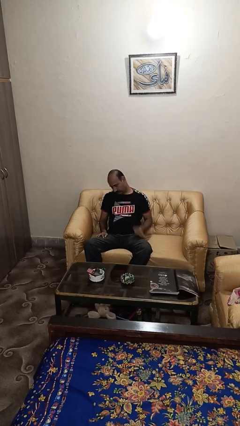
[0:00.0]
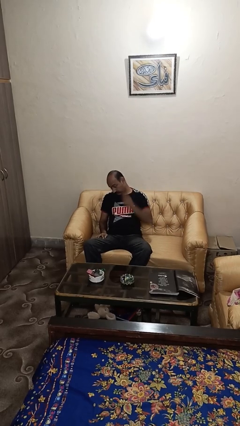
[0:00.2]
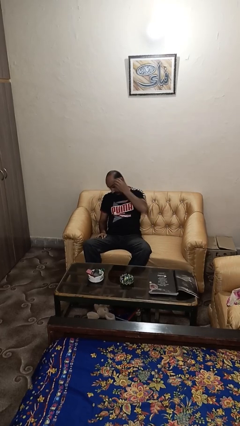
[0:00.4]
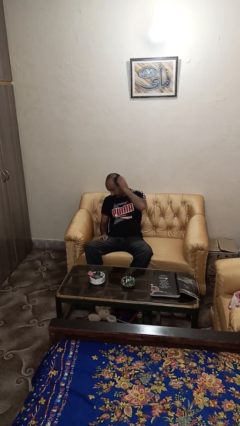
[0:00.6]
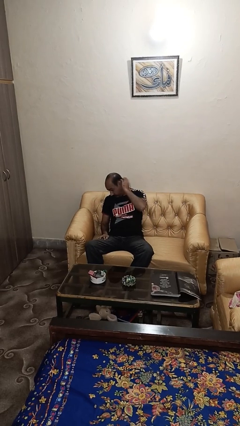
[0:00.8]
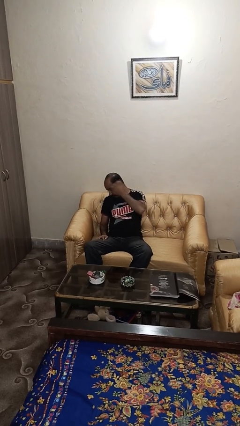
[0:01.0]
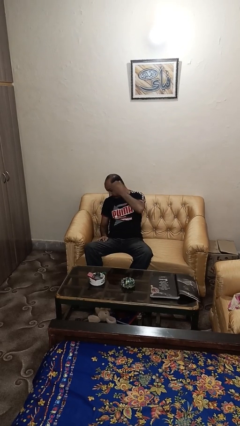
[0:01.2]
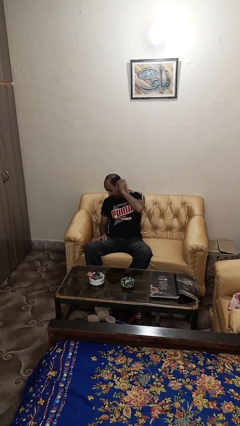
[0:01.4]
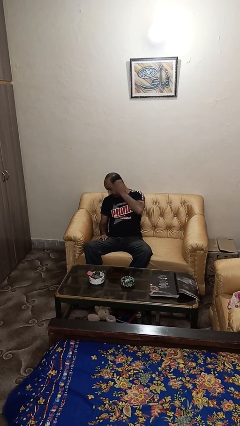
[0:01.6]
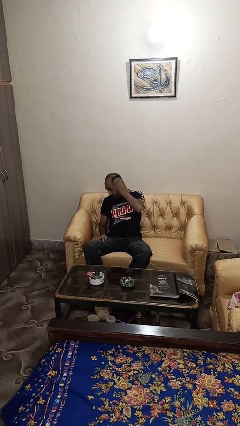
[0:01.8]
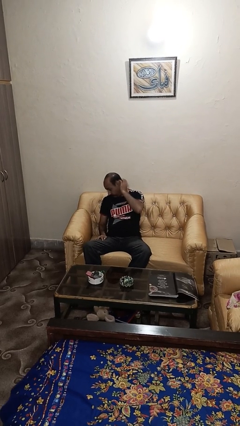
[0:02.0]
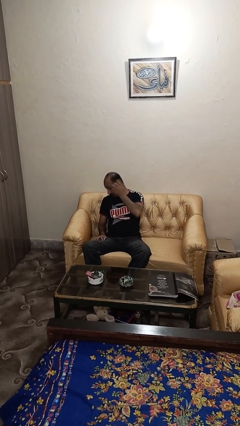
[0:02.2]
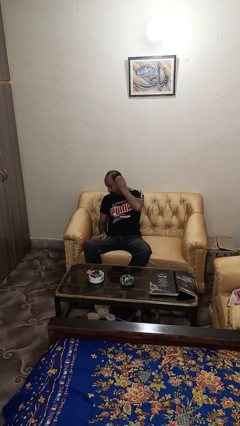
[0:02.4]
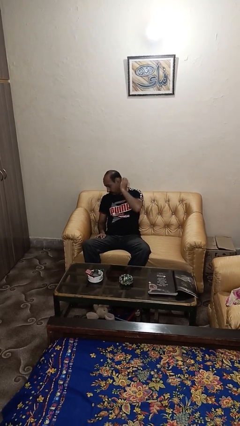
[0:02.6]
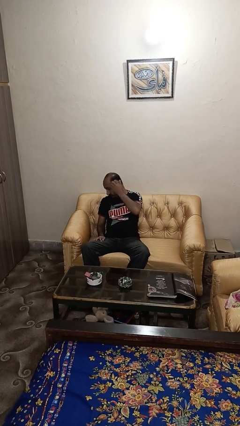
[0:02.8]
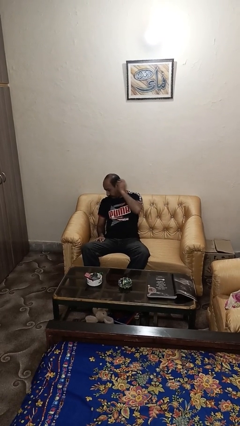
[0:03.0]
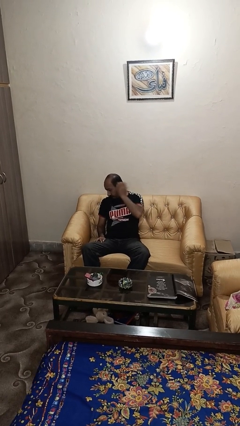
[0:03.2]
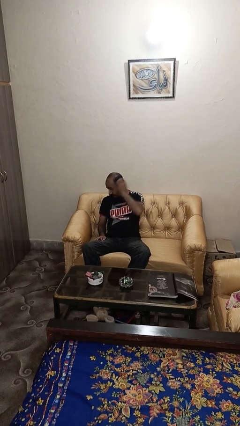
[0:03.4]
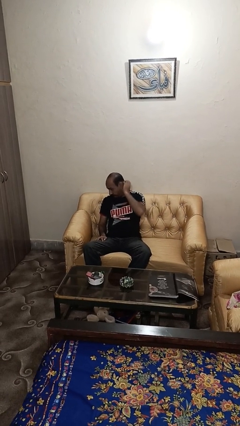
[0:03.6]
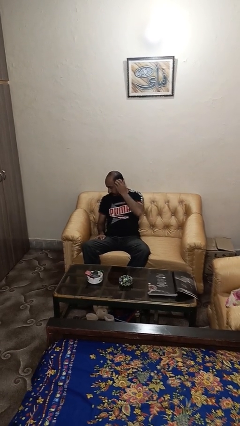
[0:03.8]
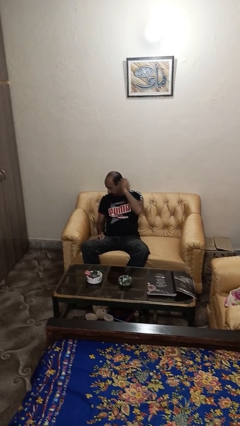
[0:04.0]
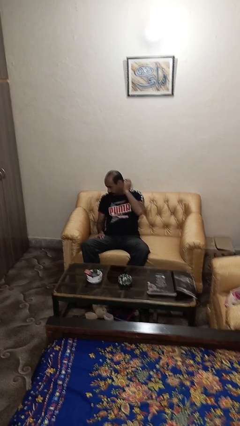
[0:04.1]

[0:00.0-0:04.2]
person strokes hair

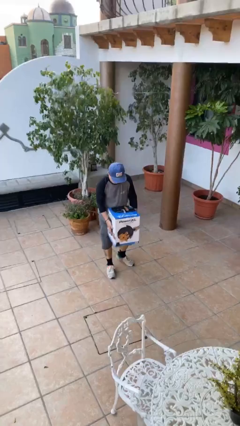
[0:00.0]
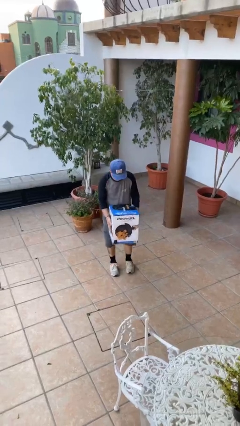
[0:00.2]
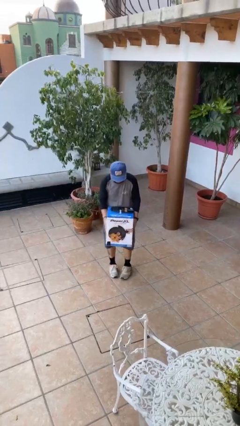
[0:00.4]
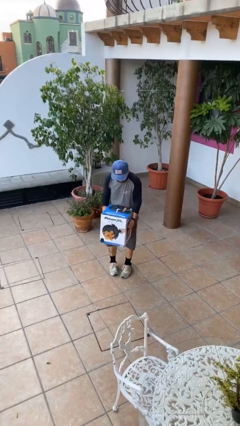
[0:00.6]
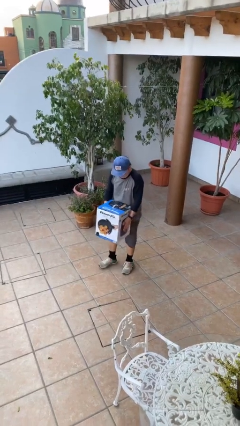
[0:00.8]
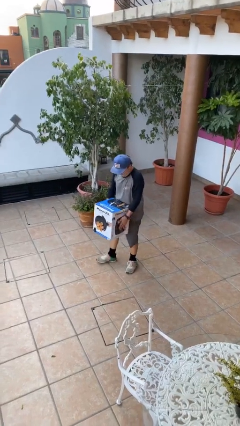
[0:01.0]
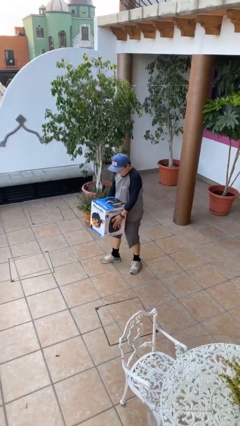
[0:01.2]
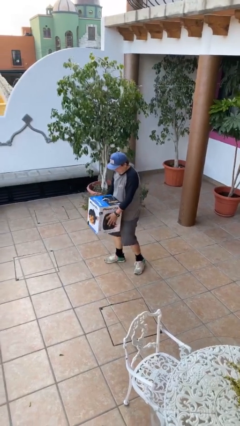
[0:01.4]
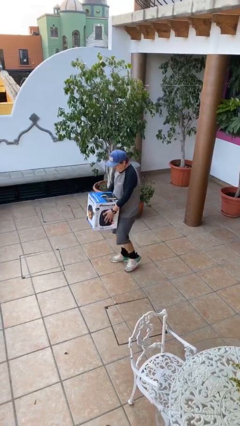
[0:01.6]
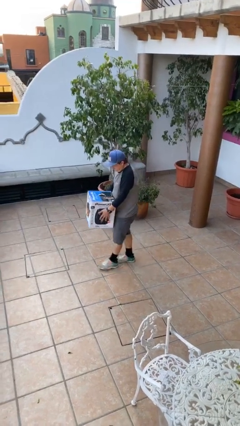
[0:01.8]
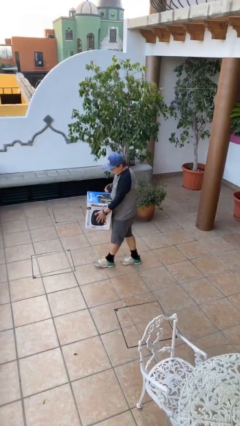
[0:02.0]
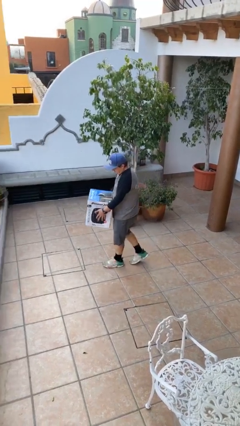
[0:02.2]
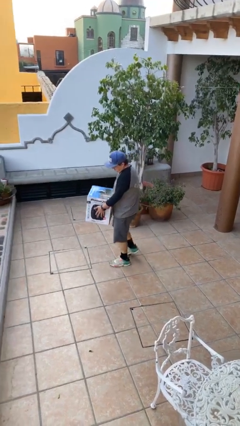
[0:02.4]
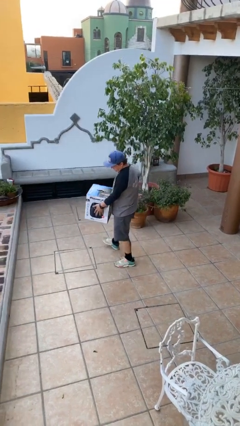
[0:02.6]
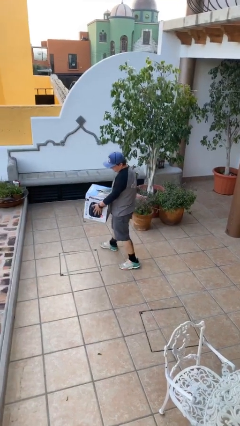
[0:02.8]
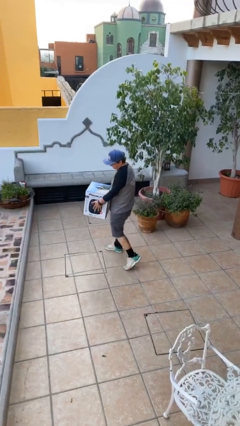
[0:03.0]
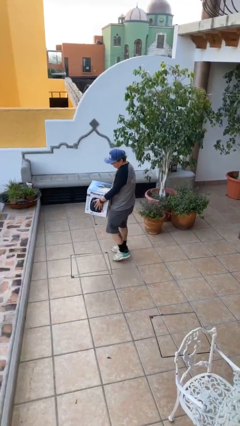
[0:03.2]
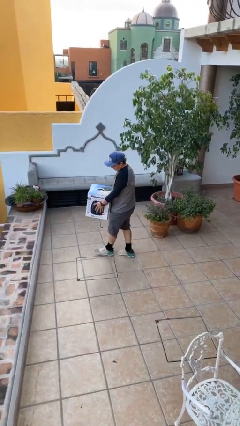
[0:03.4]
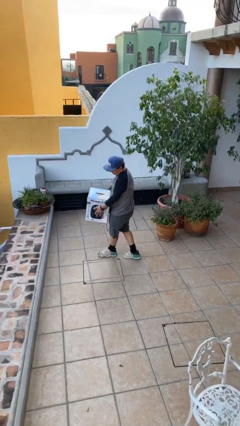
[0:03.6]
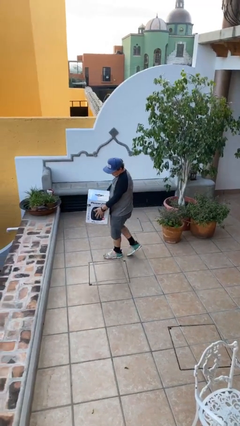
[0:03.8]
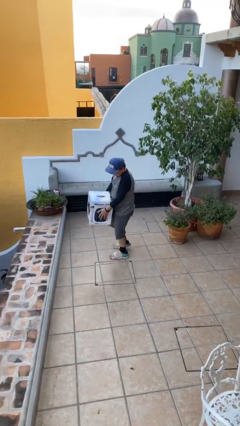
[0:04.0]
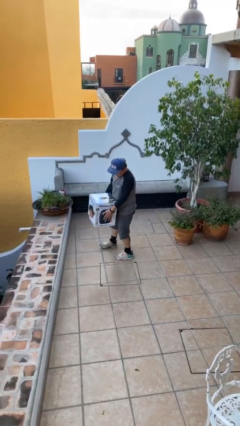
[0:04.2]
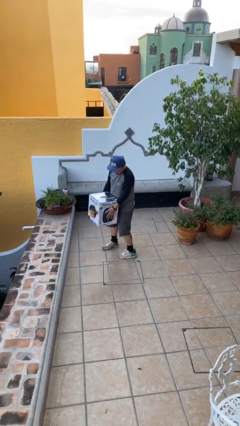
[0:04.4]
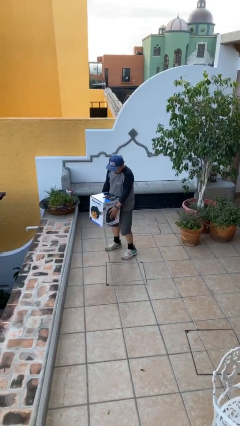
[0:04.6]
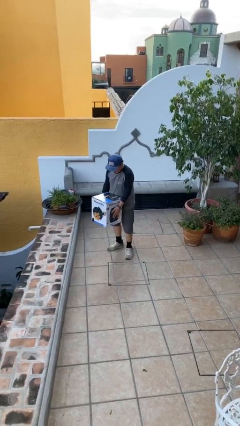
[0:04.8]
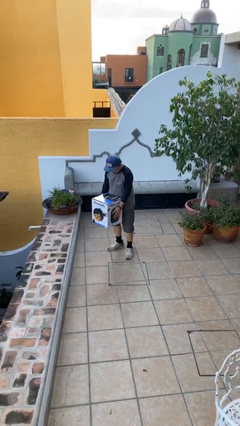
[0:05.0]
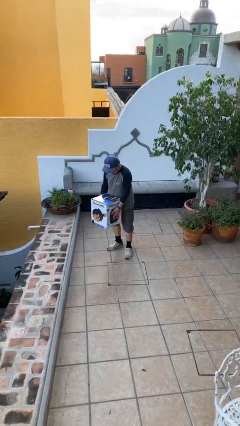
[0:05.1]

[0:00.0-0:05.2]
person carries heavy object

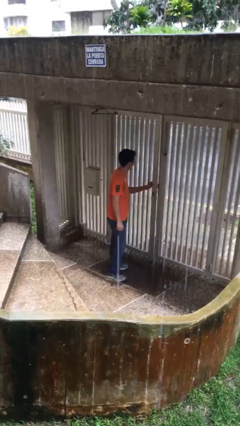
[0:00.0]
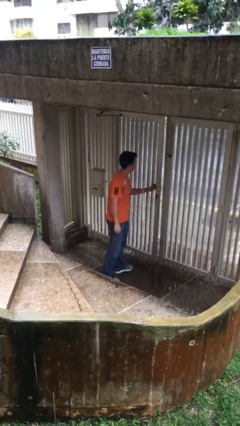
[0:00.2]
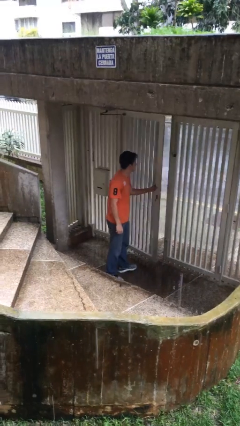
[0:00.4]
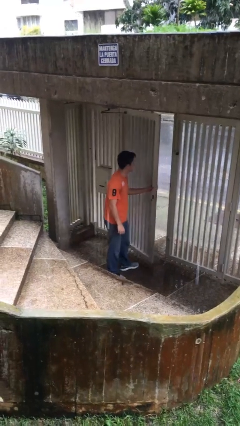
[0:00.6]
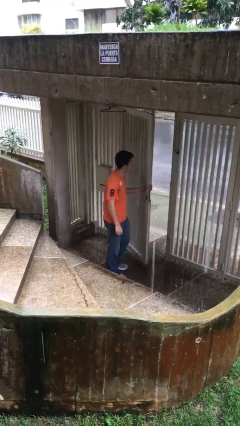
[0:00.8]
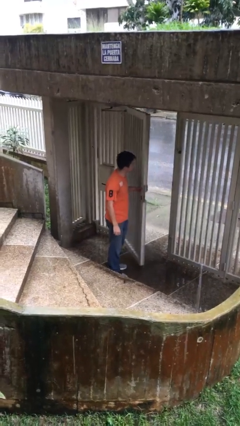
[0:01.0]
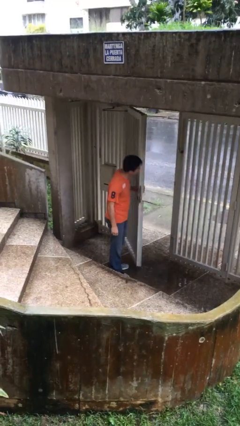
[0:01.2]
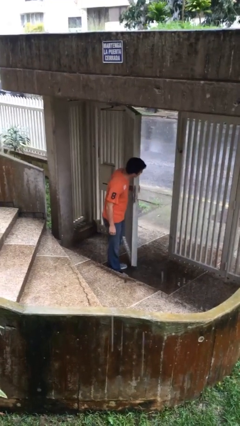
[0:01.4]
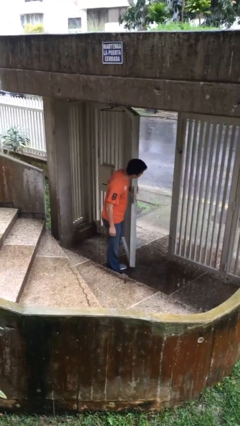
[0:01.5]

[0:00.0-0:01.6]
person opens facility door

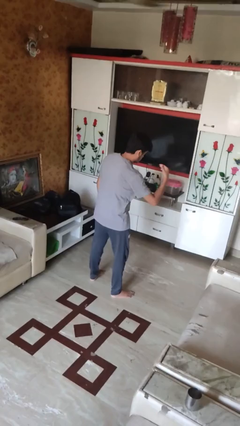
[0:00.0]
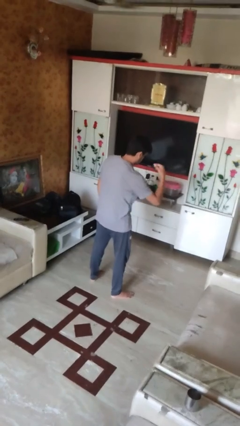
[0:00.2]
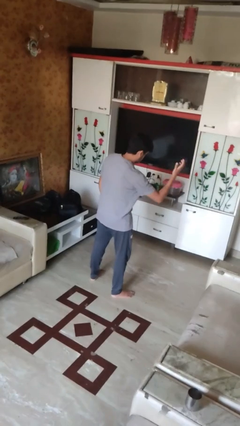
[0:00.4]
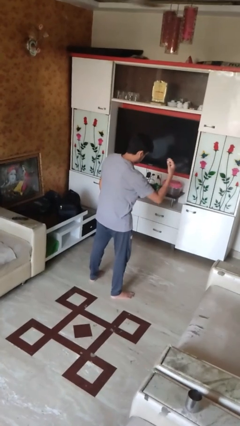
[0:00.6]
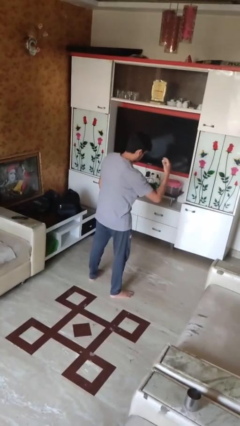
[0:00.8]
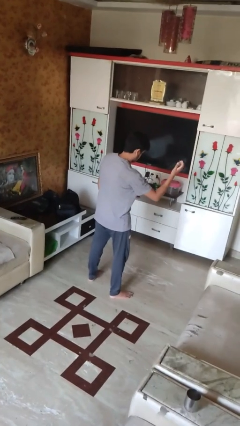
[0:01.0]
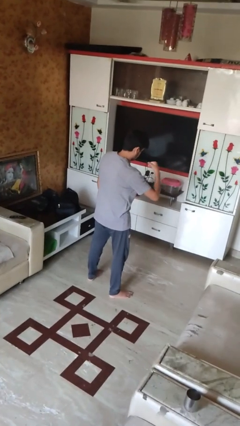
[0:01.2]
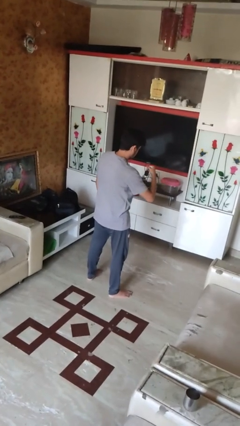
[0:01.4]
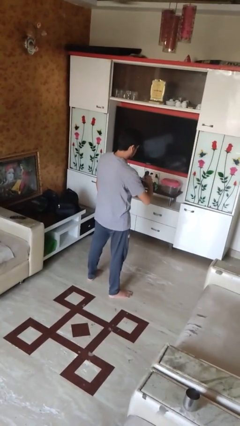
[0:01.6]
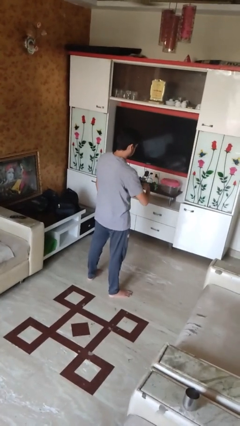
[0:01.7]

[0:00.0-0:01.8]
person gestures come here

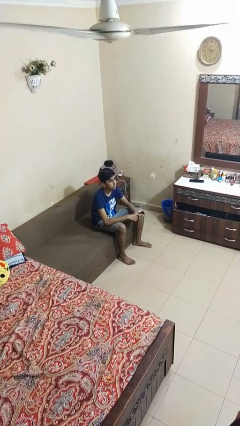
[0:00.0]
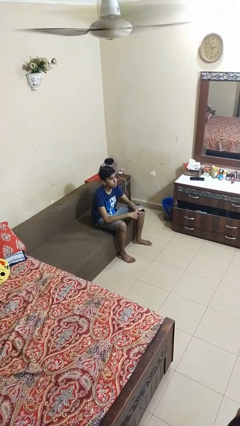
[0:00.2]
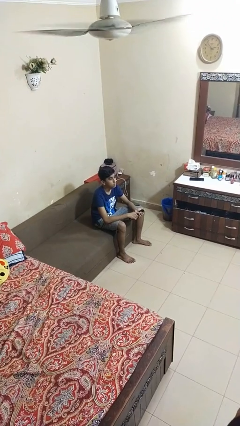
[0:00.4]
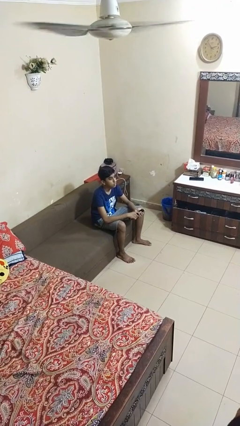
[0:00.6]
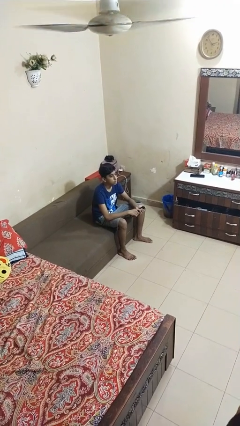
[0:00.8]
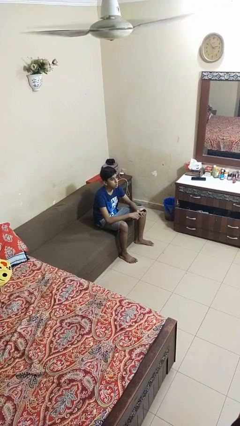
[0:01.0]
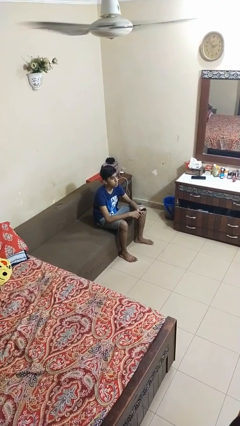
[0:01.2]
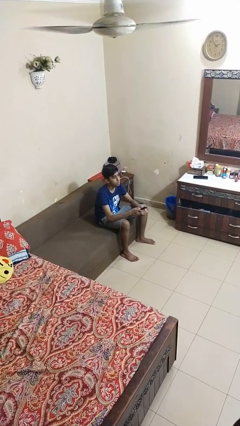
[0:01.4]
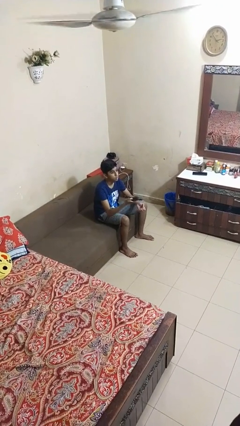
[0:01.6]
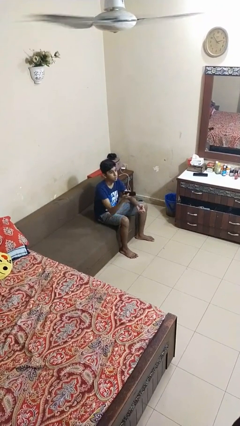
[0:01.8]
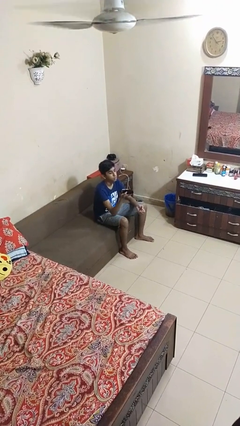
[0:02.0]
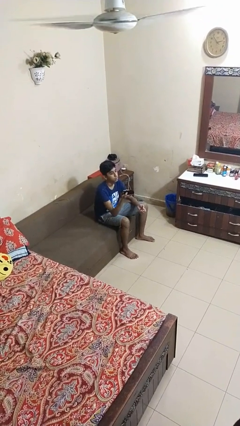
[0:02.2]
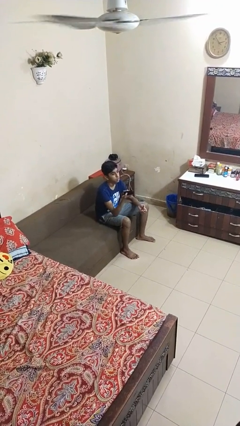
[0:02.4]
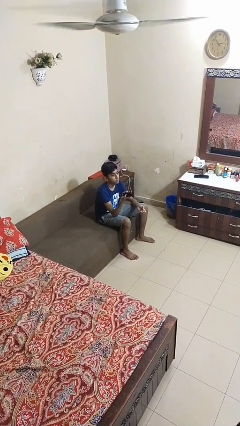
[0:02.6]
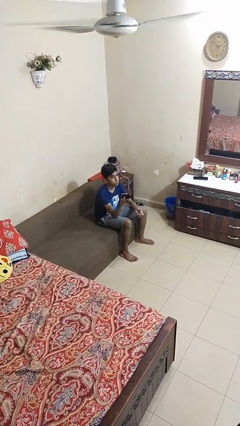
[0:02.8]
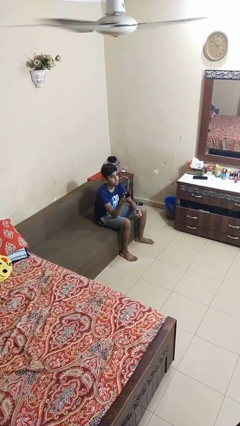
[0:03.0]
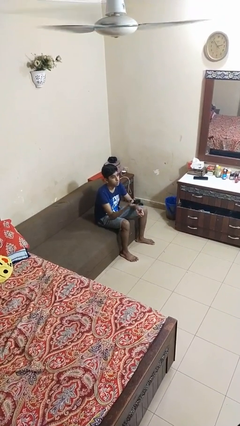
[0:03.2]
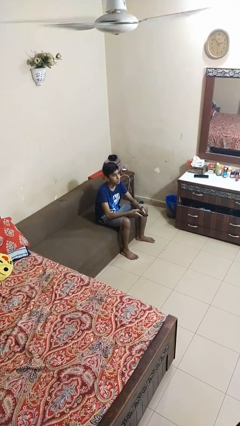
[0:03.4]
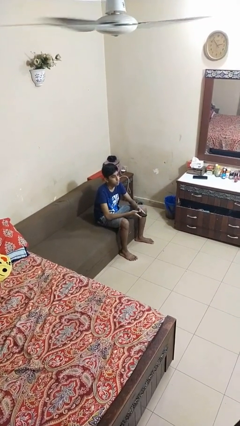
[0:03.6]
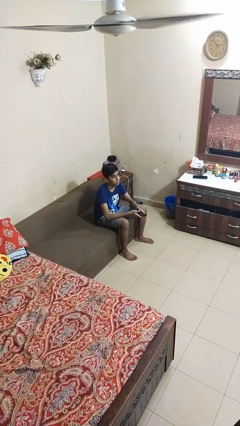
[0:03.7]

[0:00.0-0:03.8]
person uses television remote

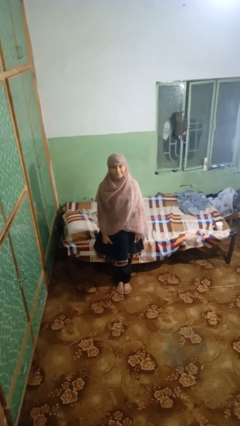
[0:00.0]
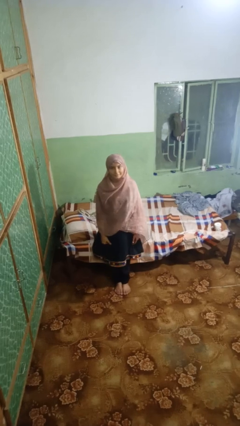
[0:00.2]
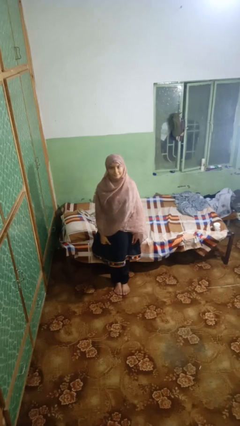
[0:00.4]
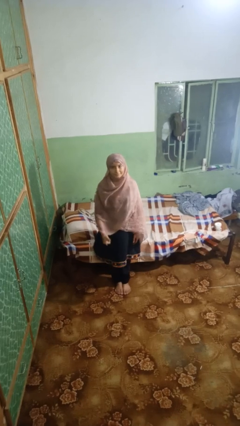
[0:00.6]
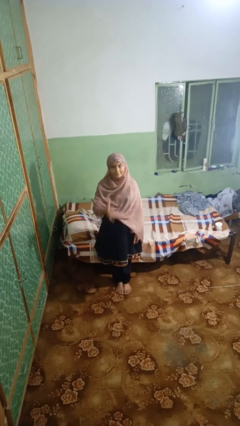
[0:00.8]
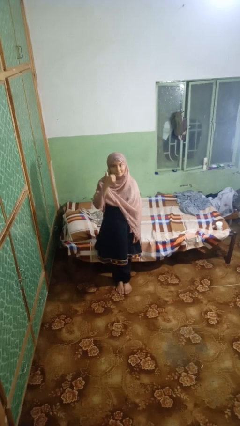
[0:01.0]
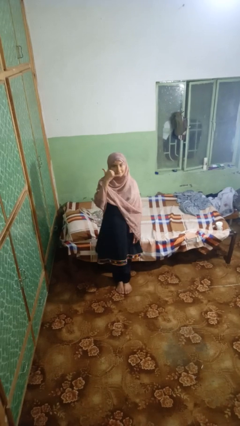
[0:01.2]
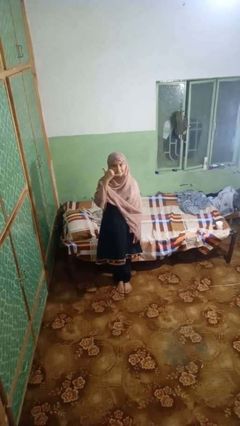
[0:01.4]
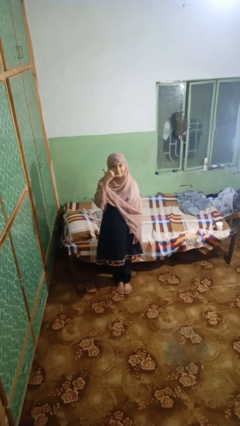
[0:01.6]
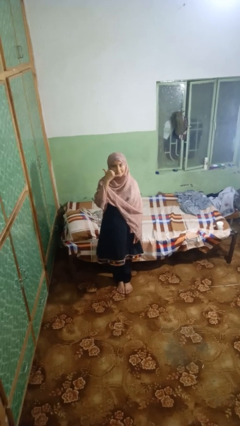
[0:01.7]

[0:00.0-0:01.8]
person gestures call me
